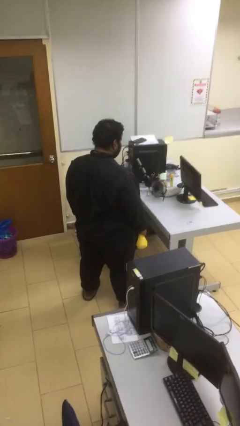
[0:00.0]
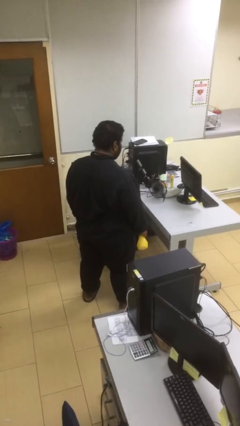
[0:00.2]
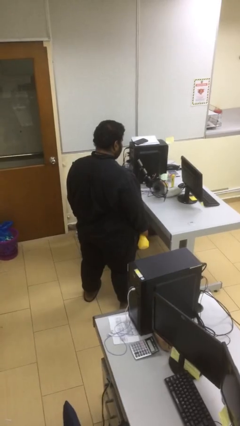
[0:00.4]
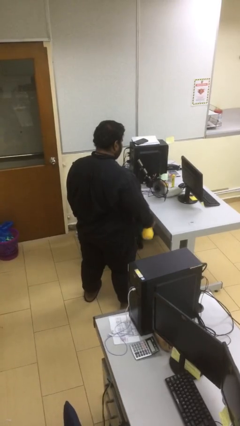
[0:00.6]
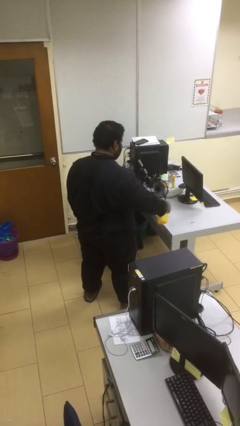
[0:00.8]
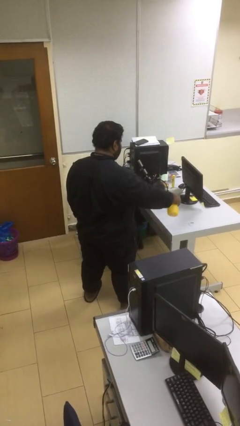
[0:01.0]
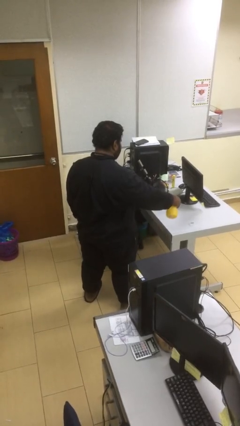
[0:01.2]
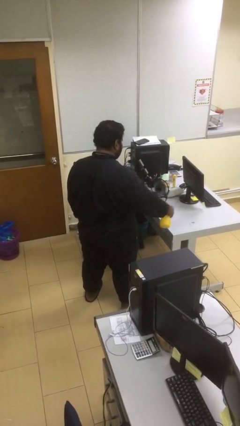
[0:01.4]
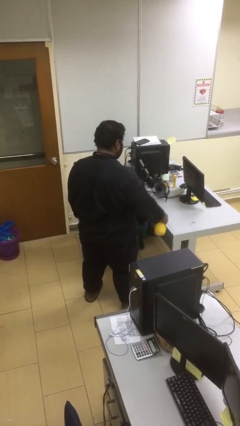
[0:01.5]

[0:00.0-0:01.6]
person sprays from bottle

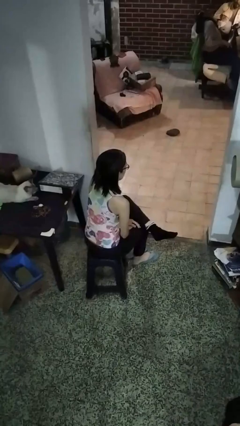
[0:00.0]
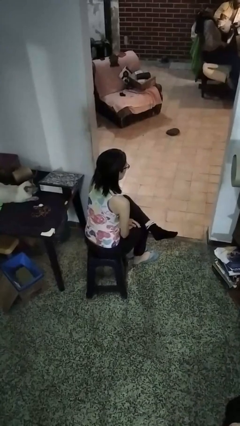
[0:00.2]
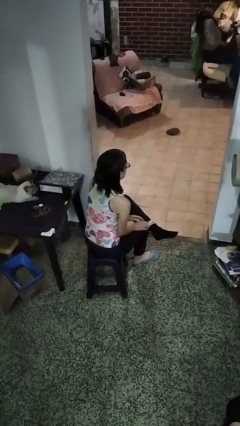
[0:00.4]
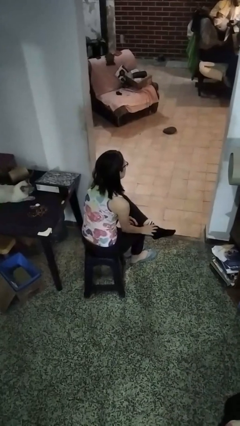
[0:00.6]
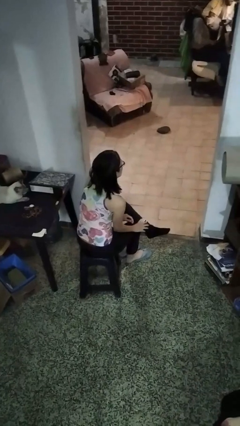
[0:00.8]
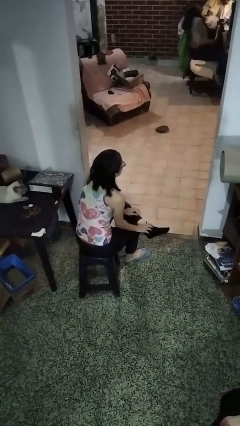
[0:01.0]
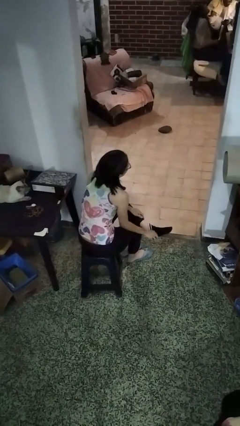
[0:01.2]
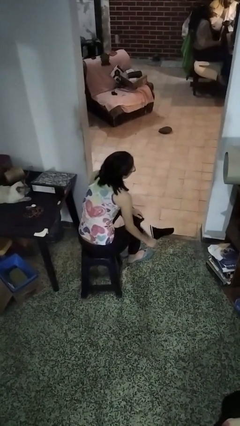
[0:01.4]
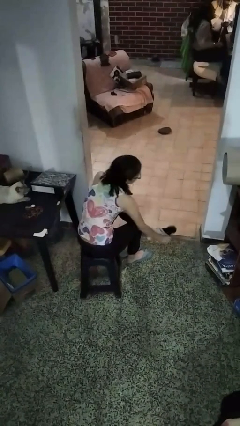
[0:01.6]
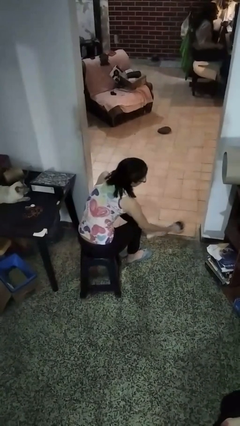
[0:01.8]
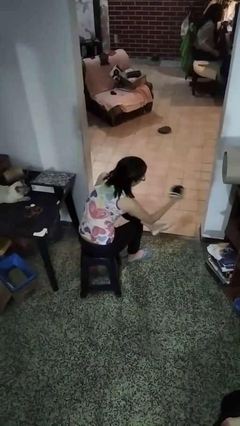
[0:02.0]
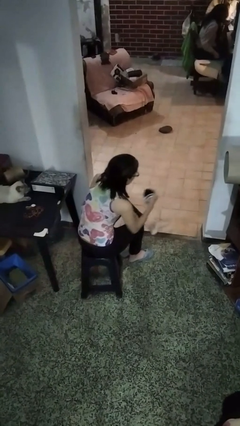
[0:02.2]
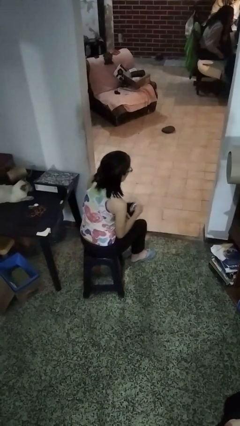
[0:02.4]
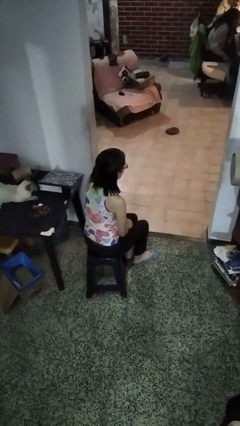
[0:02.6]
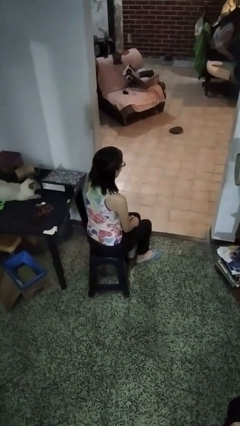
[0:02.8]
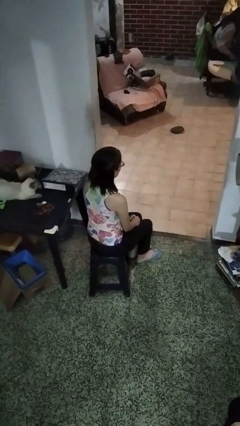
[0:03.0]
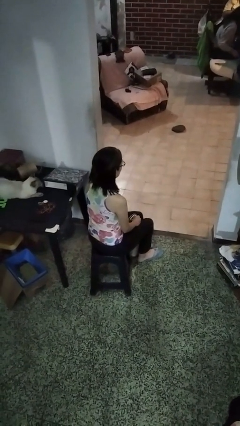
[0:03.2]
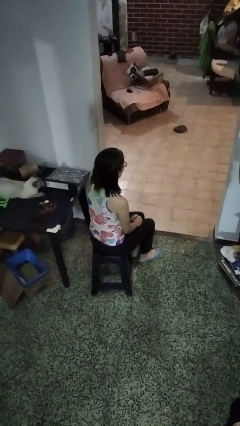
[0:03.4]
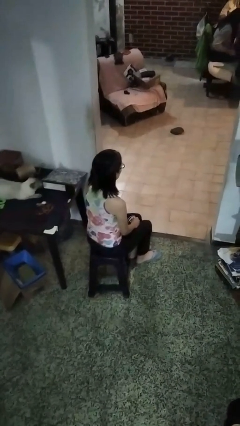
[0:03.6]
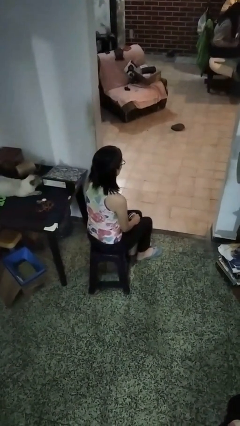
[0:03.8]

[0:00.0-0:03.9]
person takes off socks

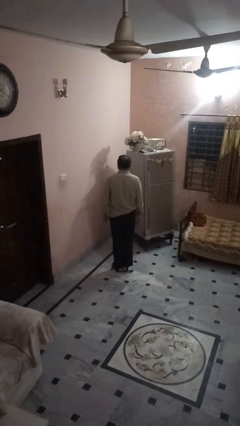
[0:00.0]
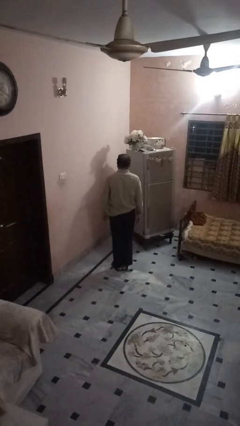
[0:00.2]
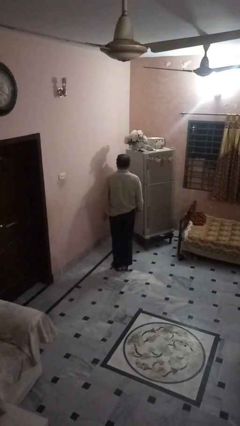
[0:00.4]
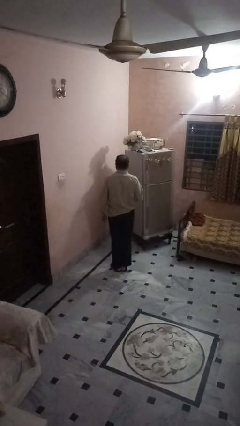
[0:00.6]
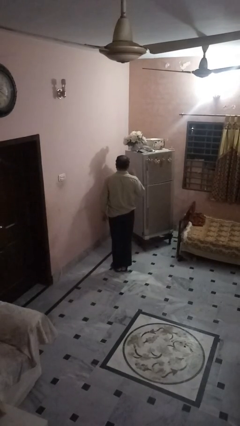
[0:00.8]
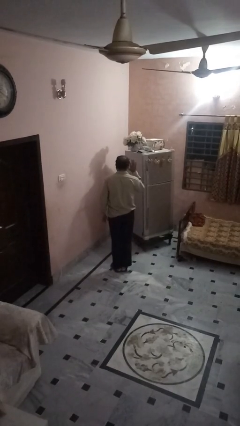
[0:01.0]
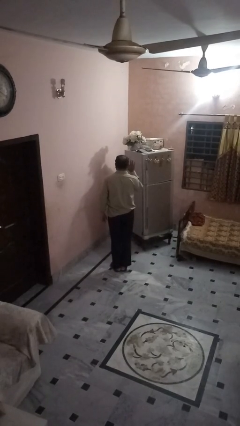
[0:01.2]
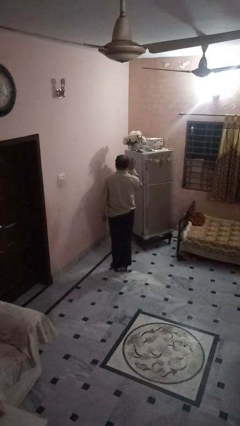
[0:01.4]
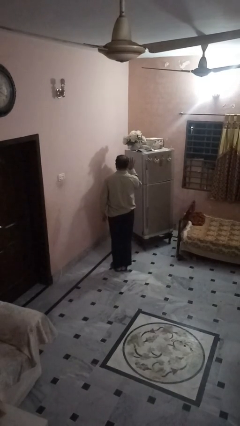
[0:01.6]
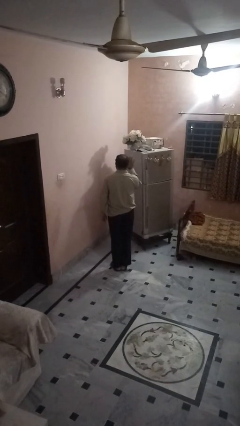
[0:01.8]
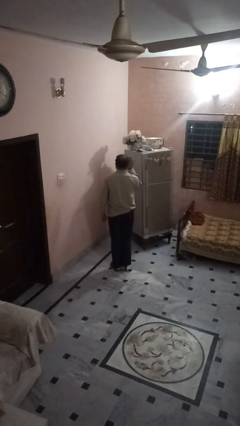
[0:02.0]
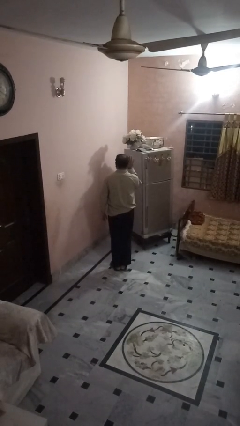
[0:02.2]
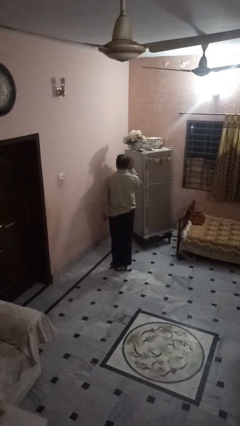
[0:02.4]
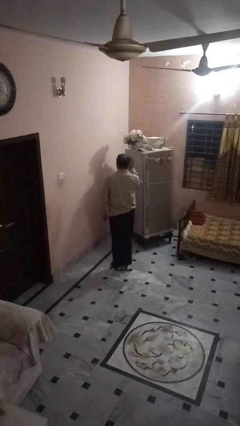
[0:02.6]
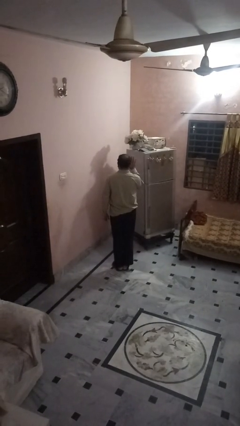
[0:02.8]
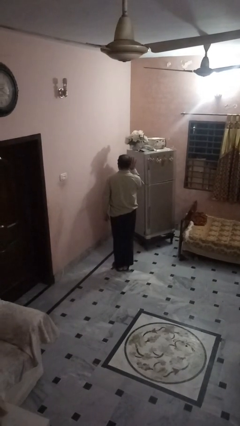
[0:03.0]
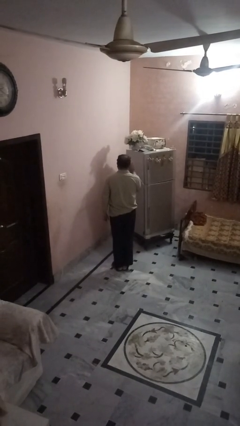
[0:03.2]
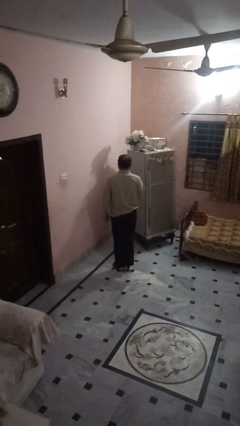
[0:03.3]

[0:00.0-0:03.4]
person gestures number five

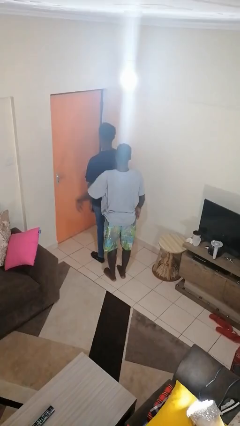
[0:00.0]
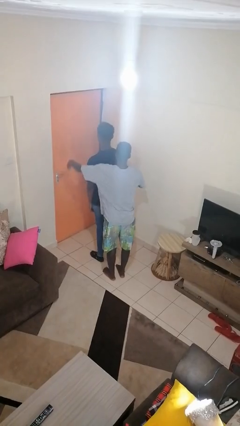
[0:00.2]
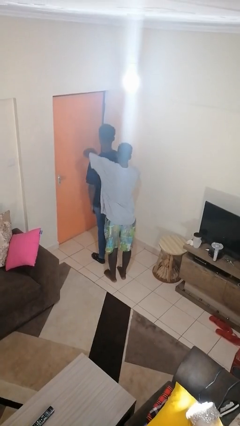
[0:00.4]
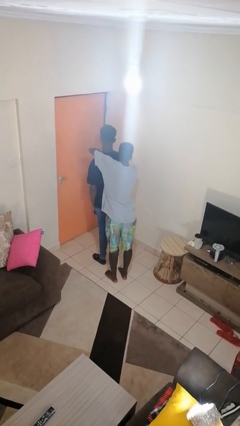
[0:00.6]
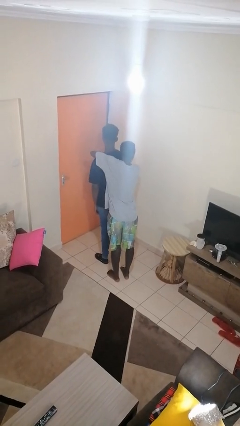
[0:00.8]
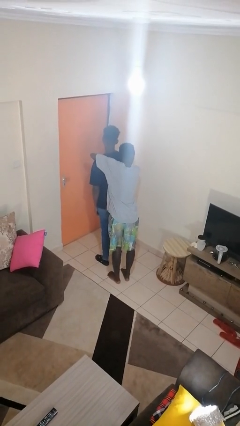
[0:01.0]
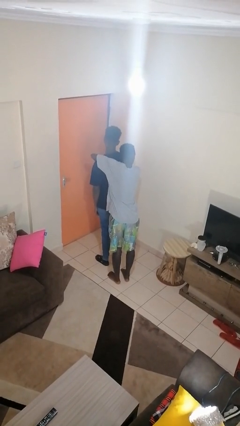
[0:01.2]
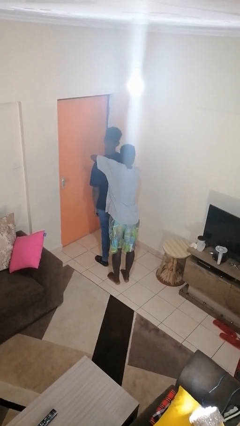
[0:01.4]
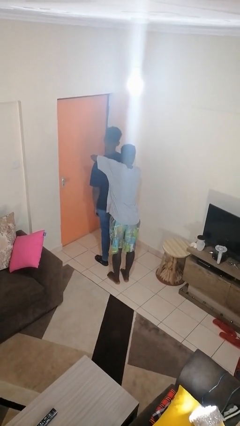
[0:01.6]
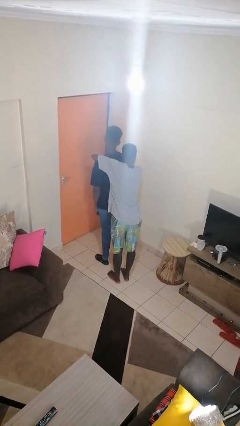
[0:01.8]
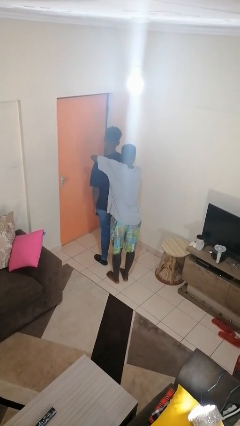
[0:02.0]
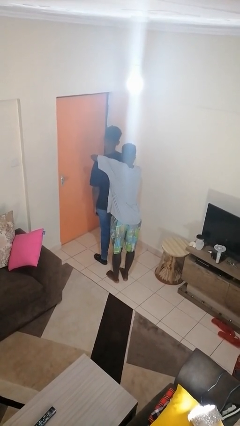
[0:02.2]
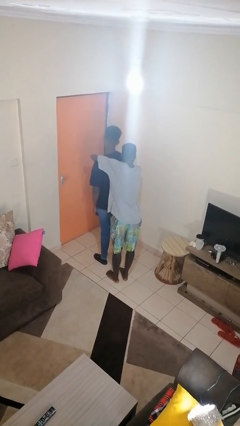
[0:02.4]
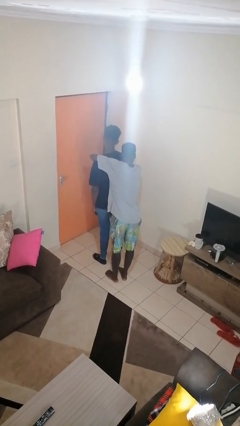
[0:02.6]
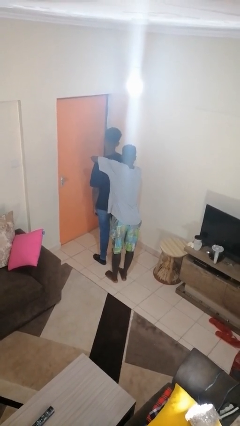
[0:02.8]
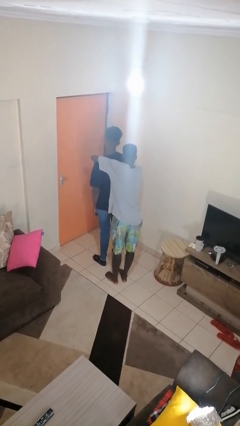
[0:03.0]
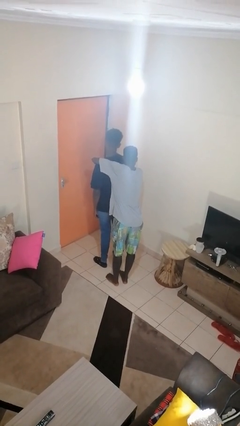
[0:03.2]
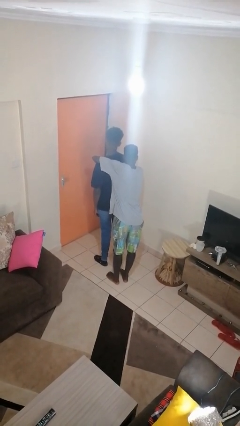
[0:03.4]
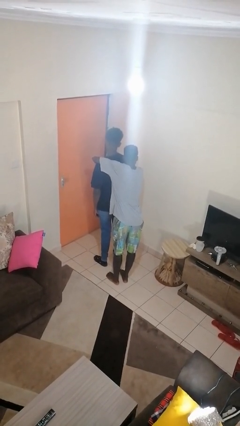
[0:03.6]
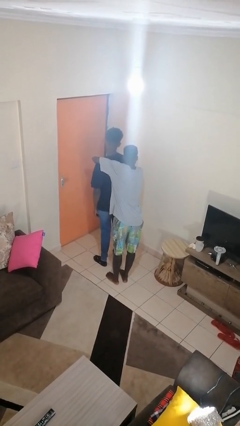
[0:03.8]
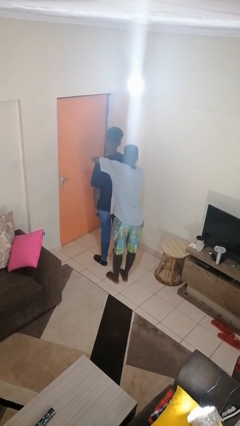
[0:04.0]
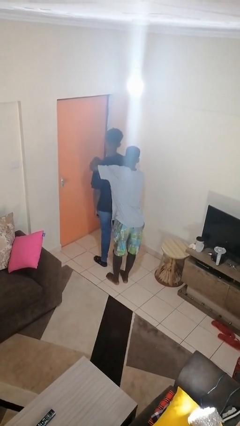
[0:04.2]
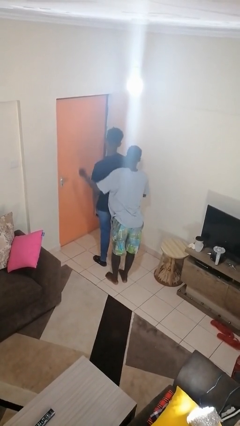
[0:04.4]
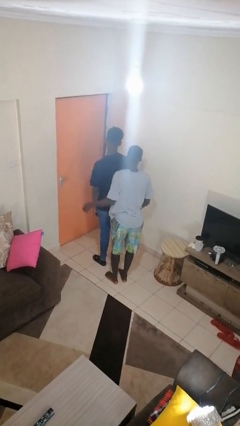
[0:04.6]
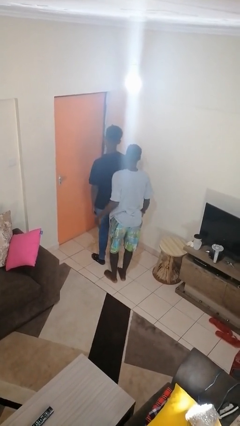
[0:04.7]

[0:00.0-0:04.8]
person hugs person from behind

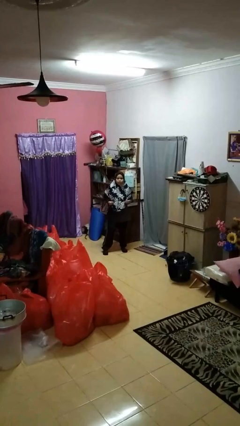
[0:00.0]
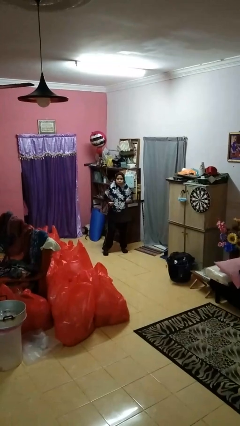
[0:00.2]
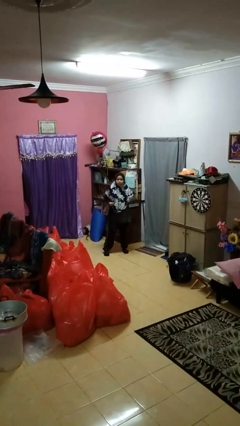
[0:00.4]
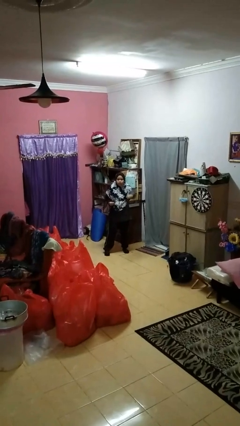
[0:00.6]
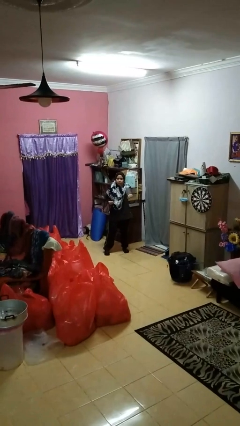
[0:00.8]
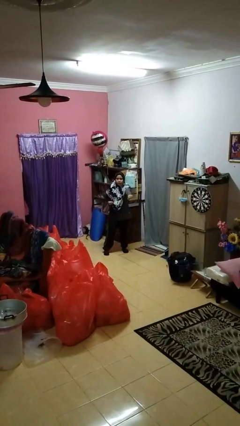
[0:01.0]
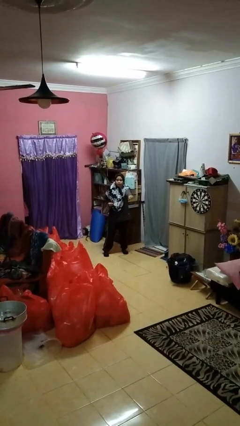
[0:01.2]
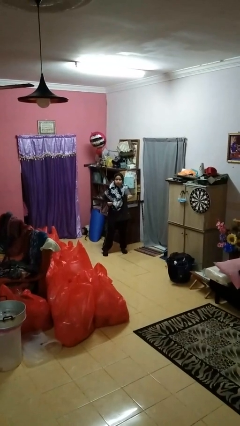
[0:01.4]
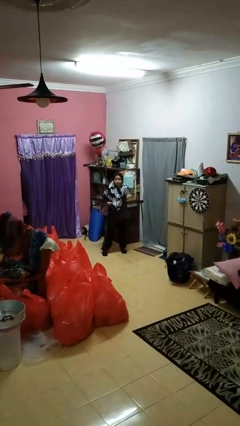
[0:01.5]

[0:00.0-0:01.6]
person punches

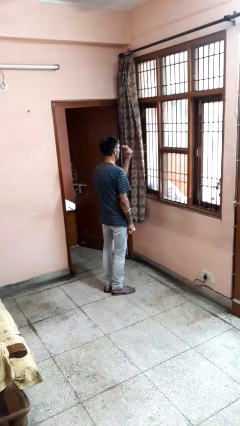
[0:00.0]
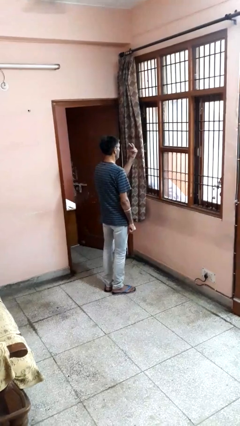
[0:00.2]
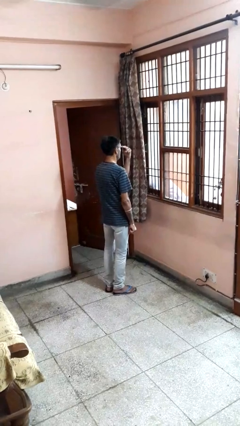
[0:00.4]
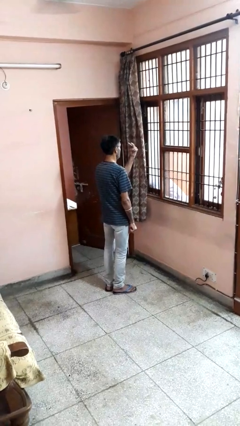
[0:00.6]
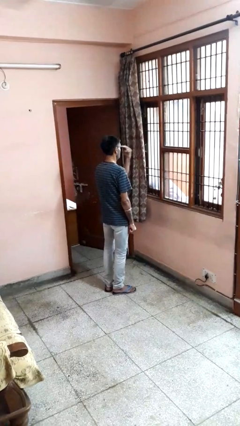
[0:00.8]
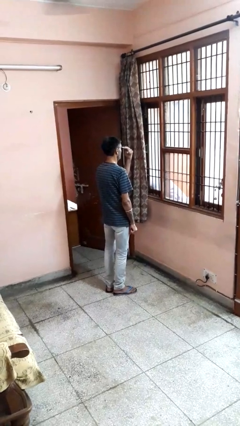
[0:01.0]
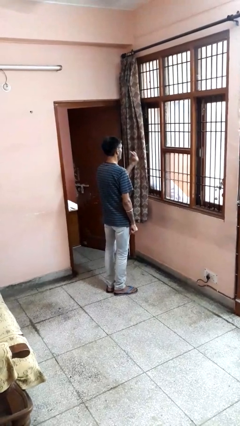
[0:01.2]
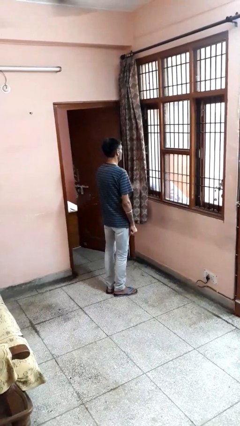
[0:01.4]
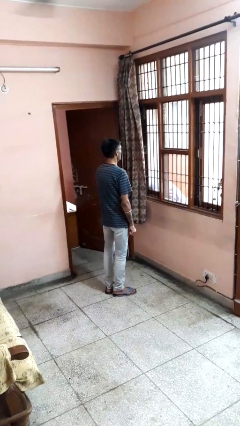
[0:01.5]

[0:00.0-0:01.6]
person gestures watch closely

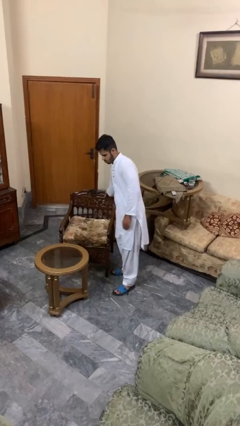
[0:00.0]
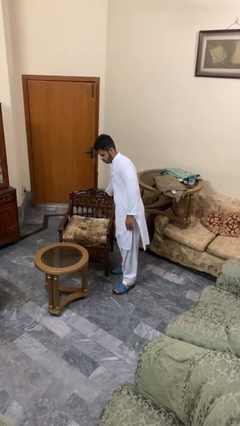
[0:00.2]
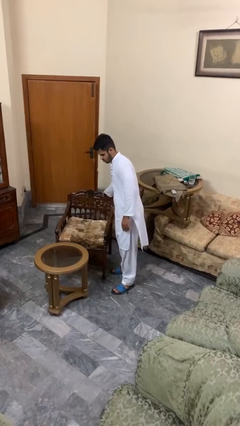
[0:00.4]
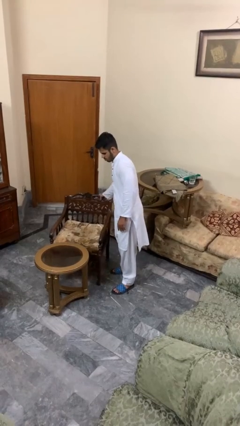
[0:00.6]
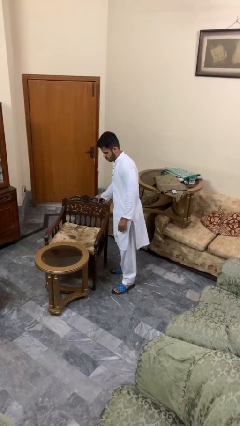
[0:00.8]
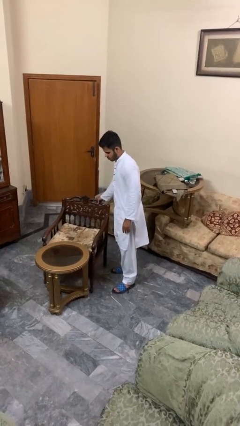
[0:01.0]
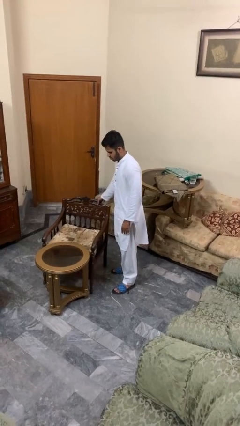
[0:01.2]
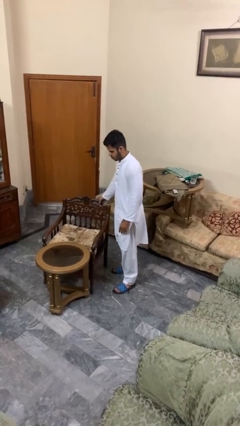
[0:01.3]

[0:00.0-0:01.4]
person pushes in chair
